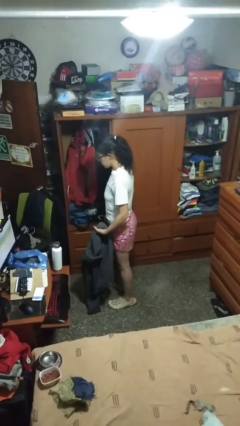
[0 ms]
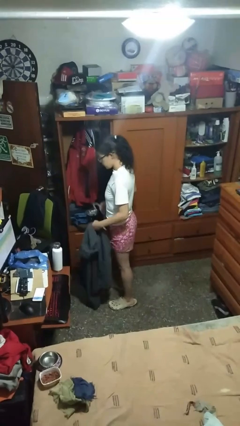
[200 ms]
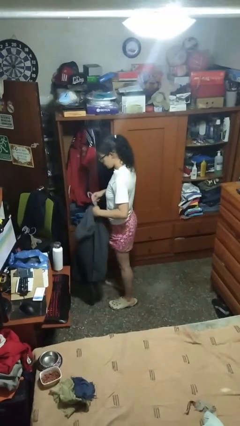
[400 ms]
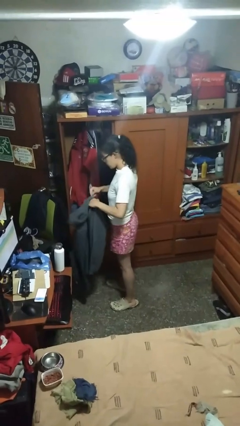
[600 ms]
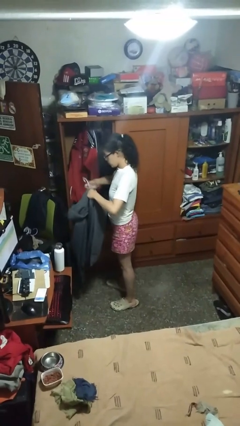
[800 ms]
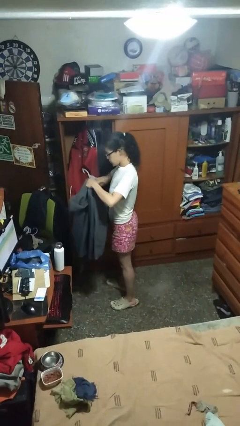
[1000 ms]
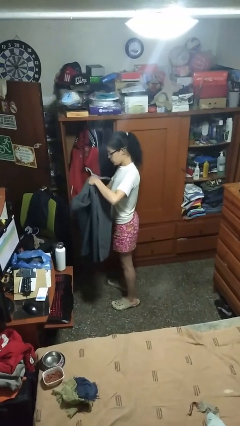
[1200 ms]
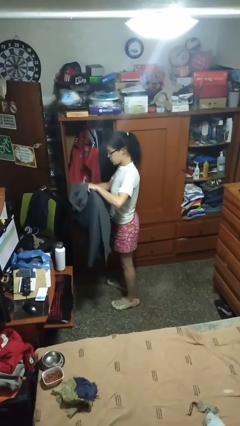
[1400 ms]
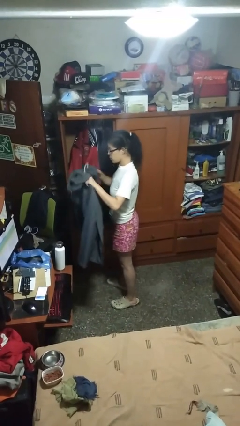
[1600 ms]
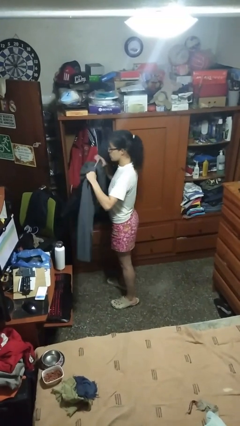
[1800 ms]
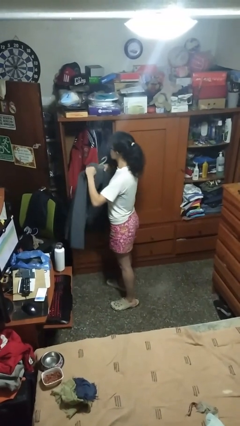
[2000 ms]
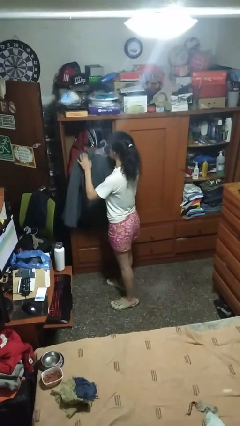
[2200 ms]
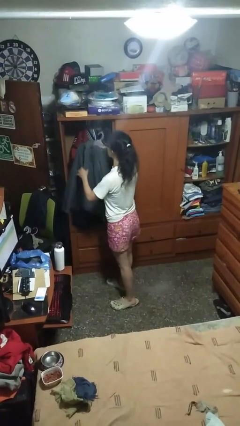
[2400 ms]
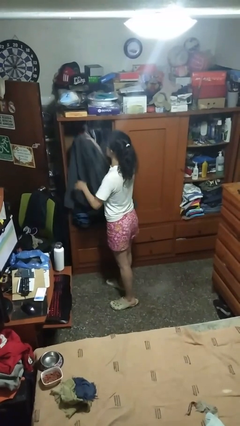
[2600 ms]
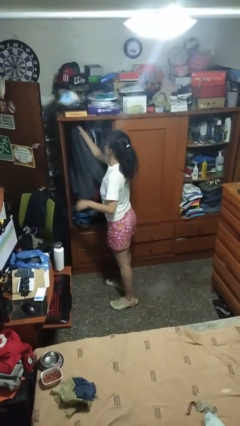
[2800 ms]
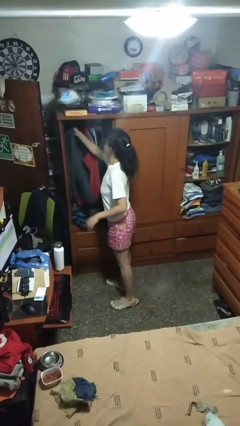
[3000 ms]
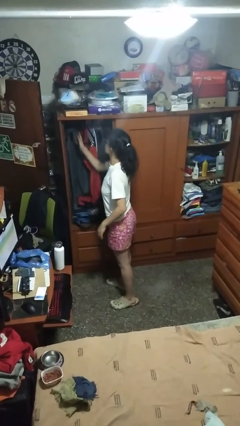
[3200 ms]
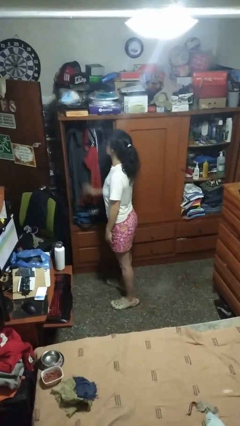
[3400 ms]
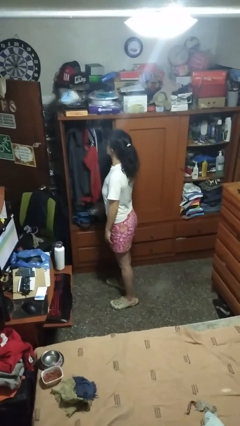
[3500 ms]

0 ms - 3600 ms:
person puts clothes into closet

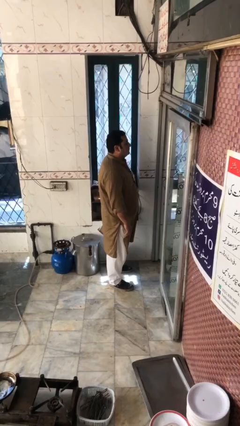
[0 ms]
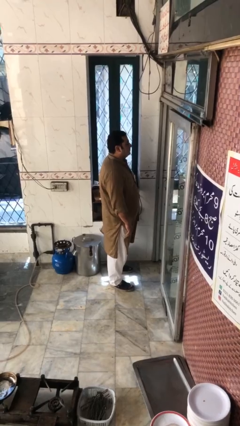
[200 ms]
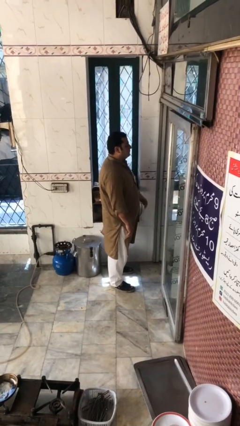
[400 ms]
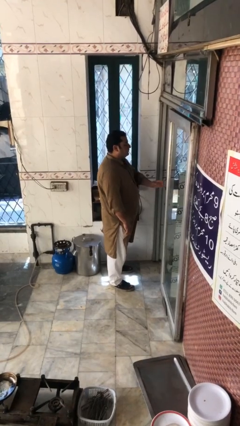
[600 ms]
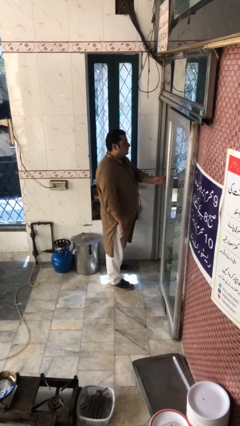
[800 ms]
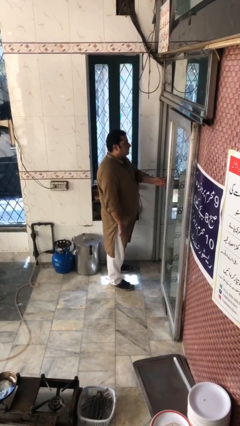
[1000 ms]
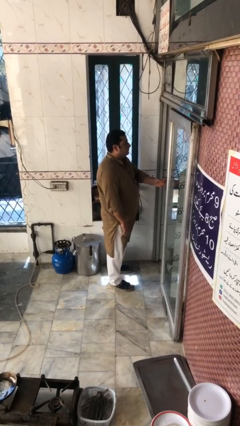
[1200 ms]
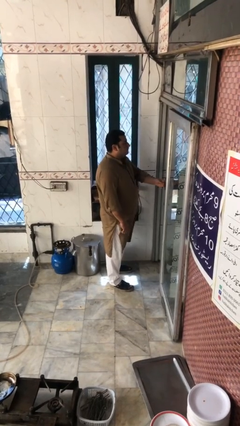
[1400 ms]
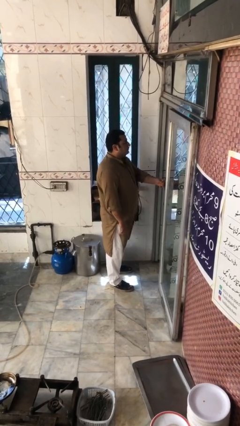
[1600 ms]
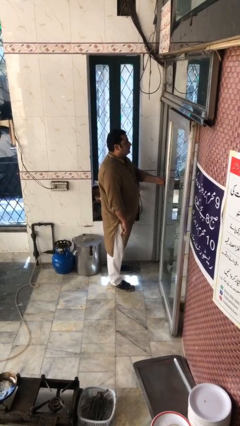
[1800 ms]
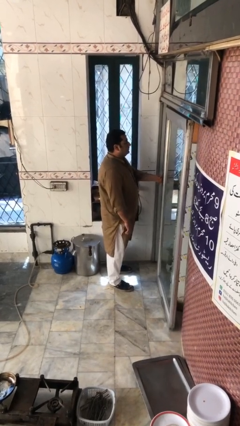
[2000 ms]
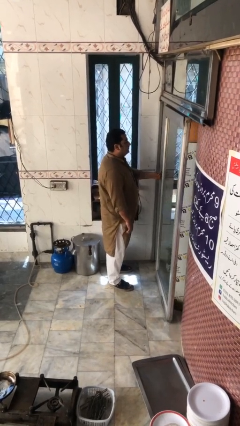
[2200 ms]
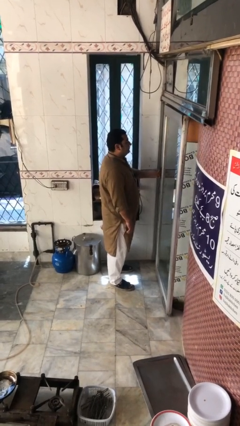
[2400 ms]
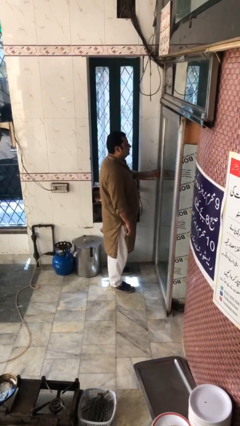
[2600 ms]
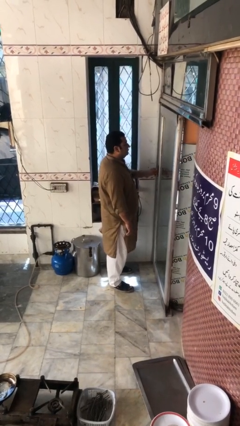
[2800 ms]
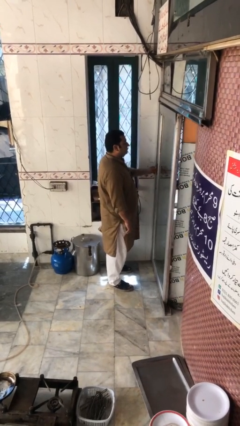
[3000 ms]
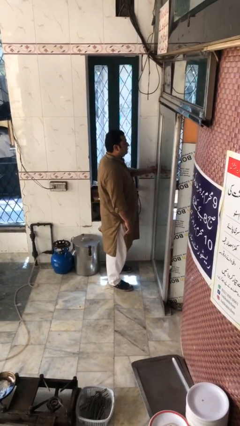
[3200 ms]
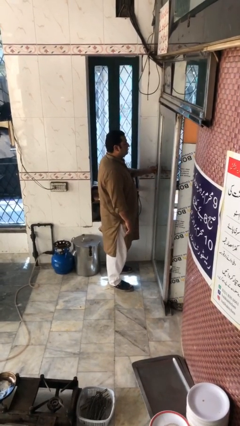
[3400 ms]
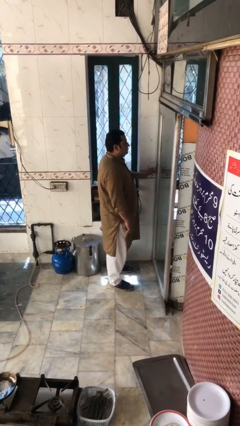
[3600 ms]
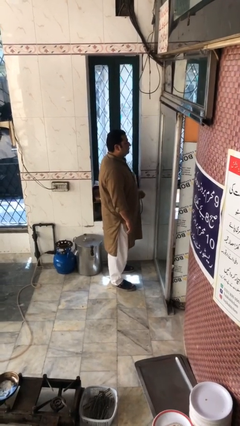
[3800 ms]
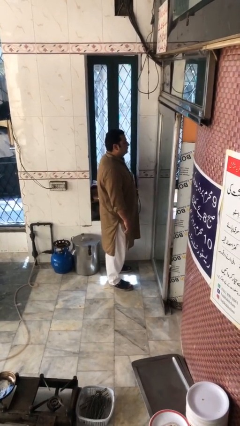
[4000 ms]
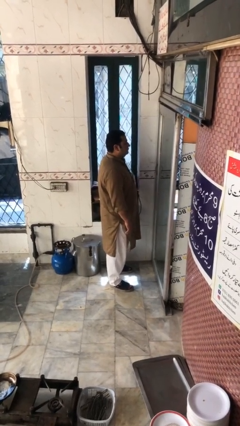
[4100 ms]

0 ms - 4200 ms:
person closes sliding door

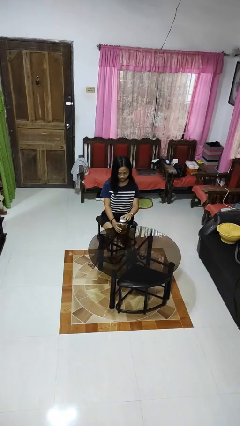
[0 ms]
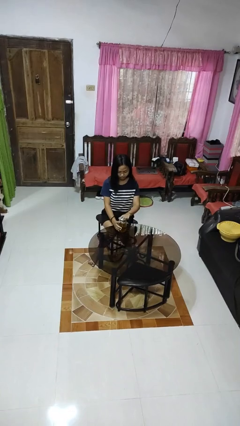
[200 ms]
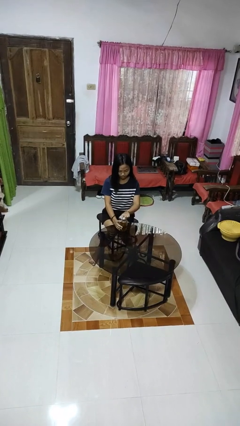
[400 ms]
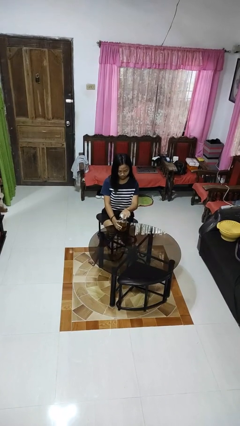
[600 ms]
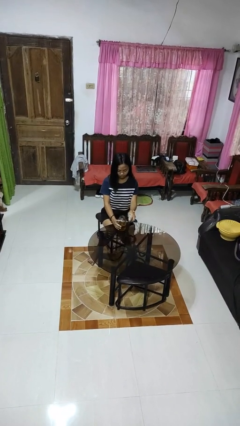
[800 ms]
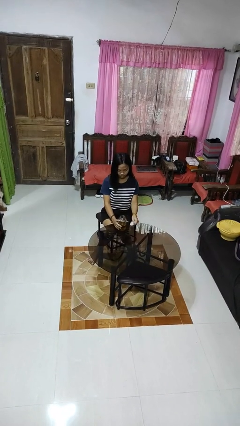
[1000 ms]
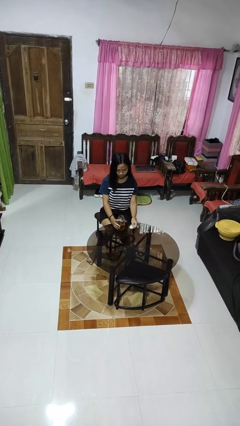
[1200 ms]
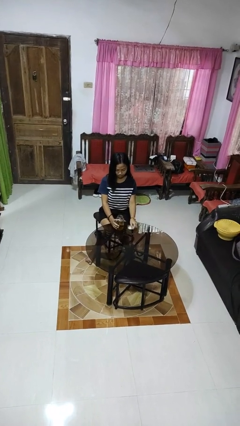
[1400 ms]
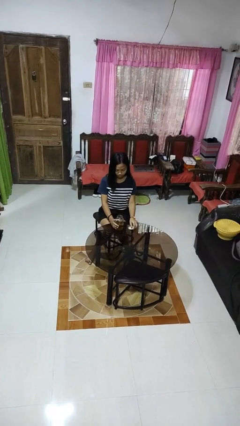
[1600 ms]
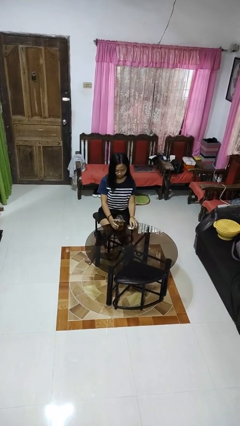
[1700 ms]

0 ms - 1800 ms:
person opens jar

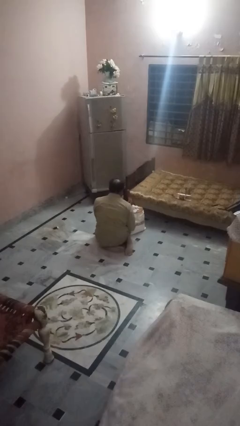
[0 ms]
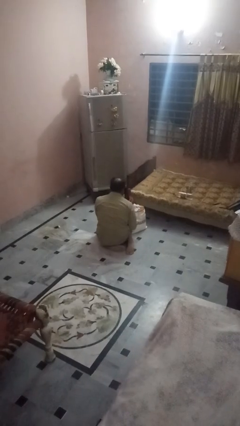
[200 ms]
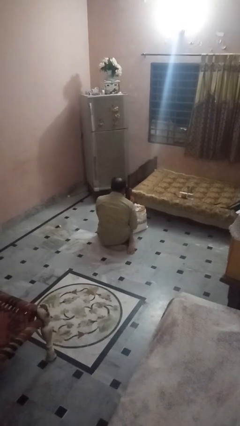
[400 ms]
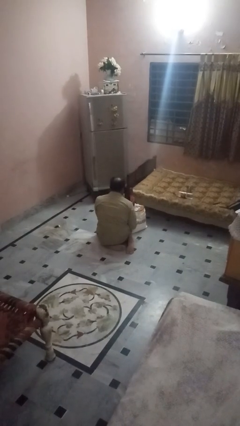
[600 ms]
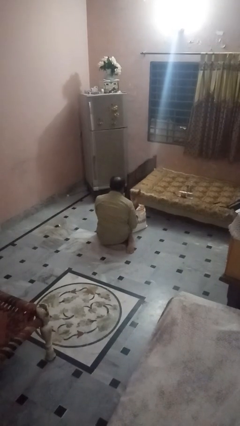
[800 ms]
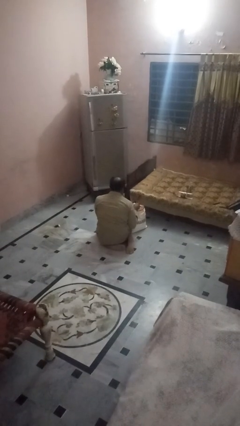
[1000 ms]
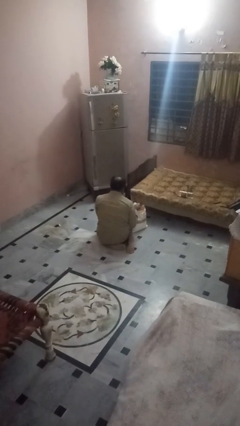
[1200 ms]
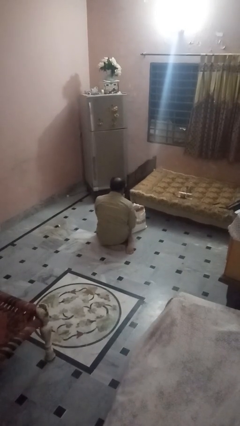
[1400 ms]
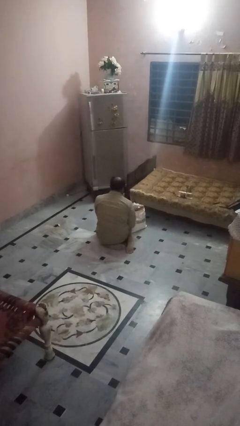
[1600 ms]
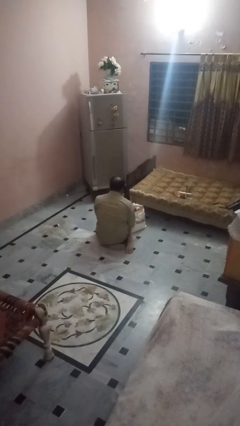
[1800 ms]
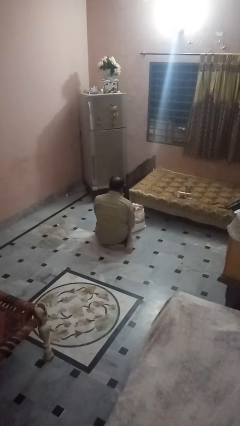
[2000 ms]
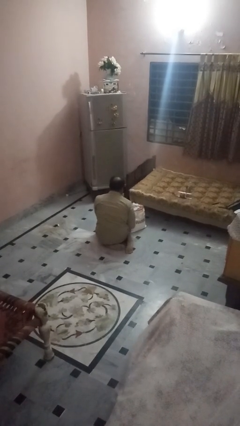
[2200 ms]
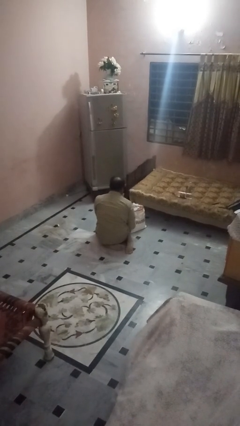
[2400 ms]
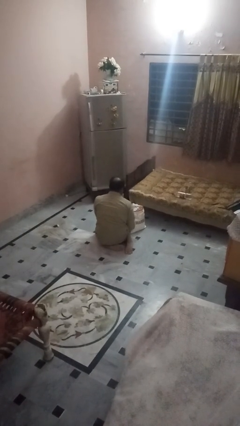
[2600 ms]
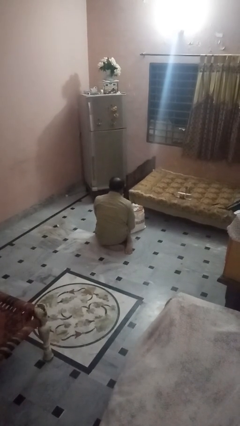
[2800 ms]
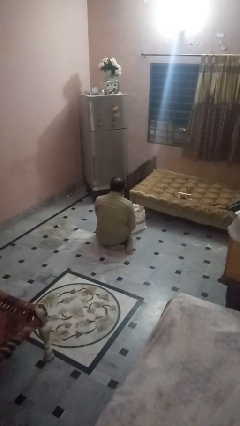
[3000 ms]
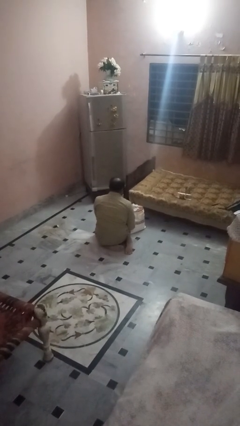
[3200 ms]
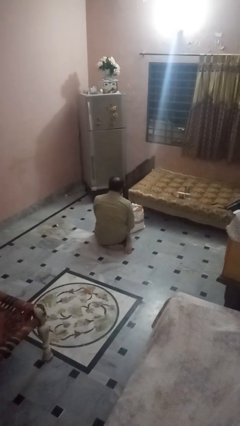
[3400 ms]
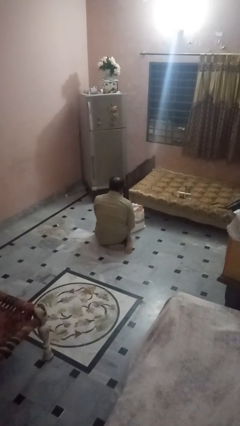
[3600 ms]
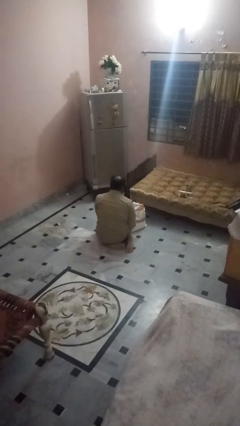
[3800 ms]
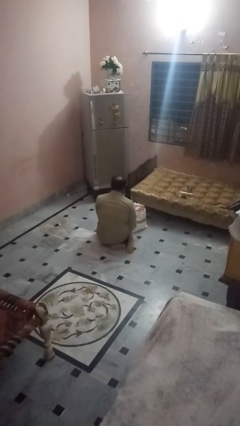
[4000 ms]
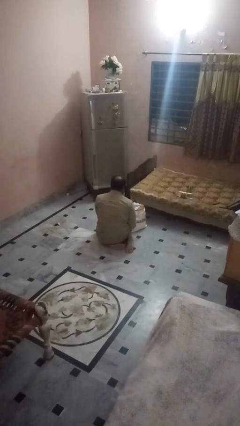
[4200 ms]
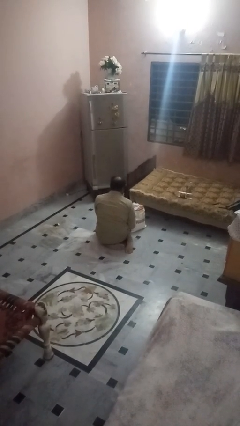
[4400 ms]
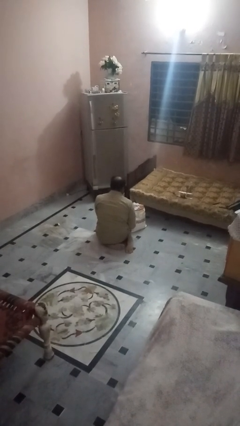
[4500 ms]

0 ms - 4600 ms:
person puts object into bag

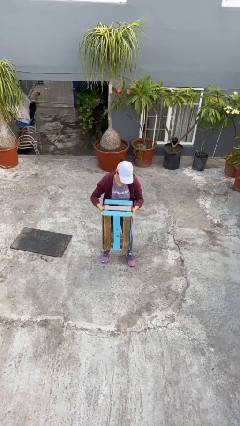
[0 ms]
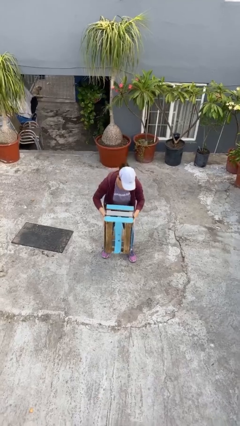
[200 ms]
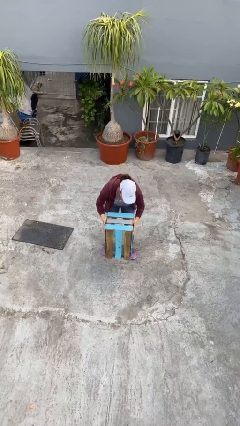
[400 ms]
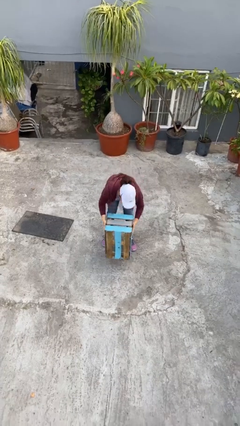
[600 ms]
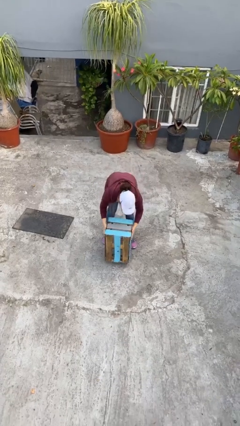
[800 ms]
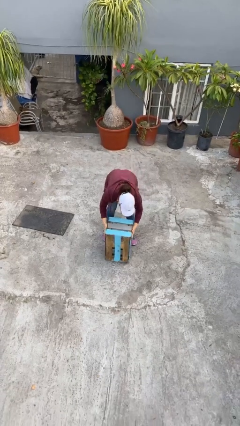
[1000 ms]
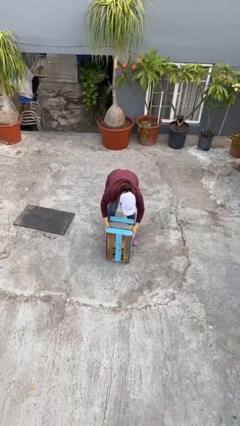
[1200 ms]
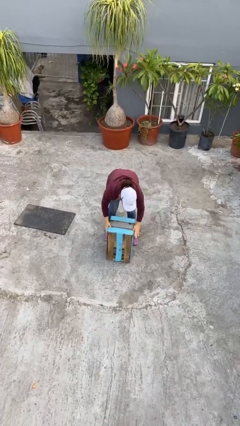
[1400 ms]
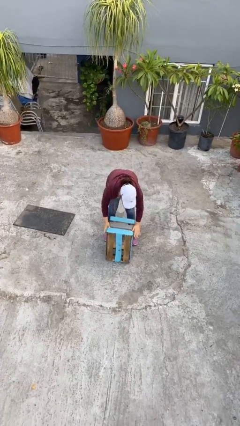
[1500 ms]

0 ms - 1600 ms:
person puts down object on floor

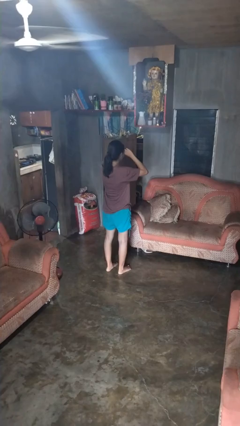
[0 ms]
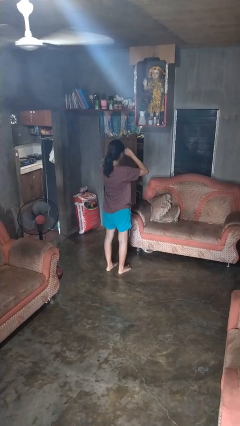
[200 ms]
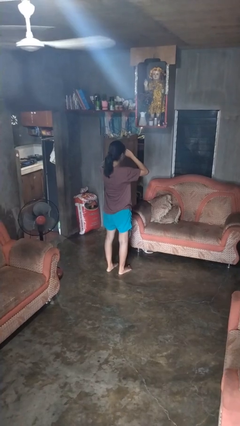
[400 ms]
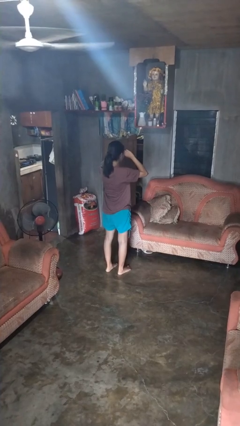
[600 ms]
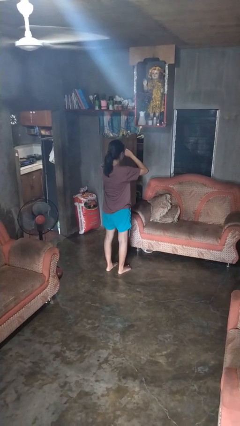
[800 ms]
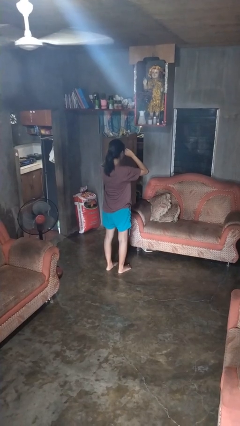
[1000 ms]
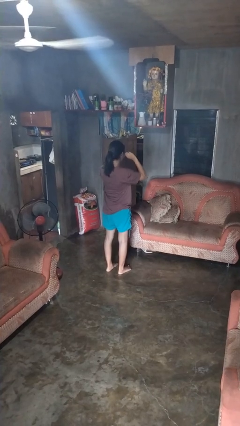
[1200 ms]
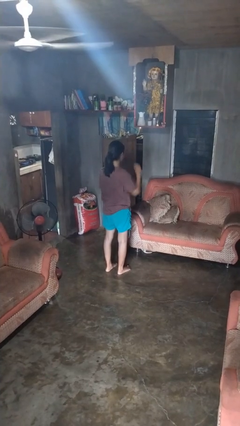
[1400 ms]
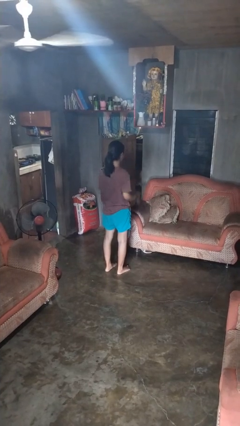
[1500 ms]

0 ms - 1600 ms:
person rubs eyes

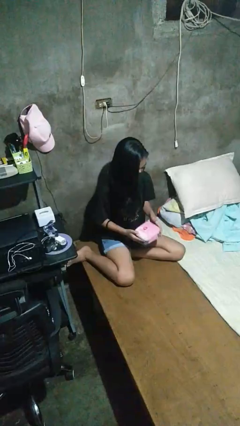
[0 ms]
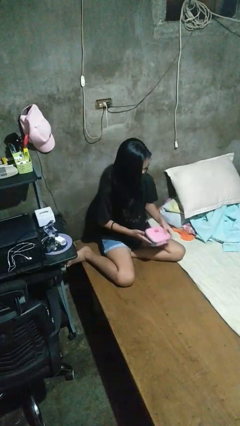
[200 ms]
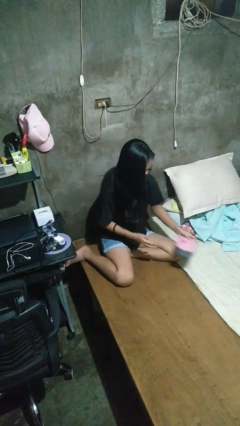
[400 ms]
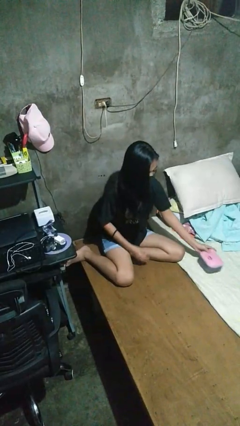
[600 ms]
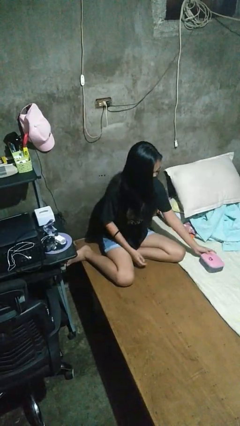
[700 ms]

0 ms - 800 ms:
person puts down object on bed
